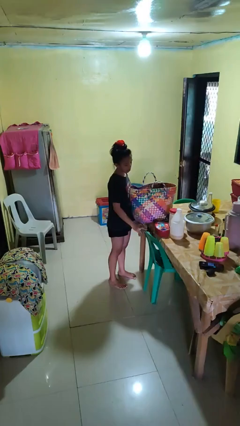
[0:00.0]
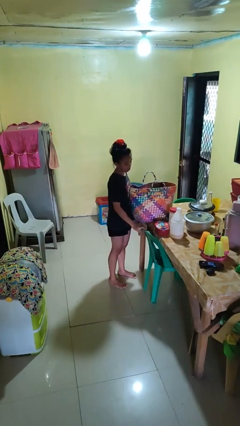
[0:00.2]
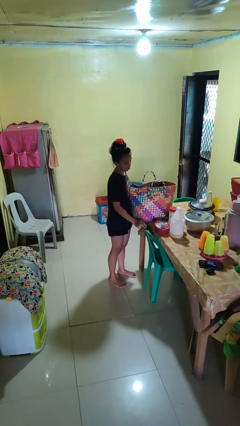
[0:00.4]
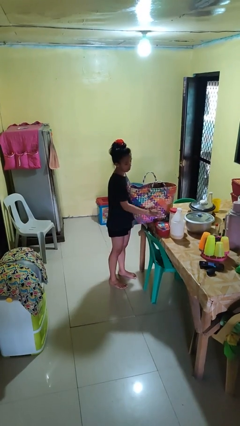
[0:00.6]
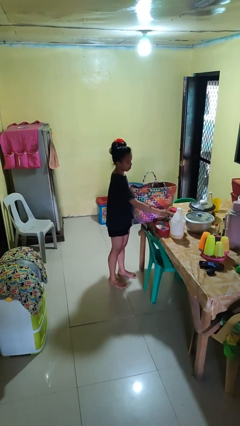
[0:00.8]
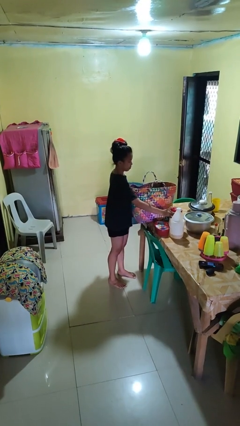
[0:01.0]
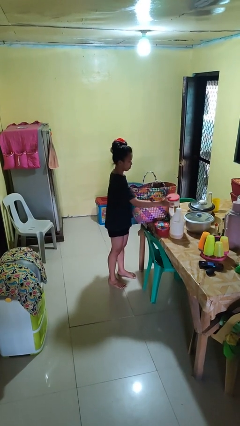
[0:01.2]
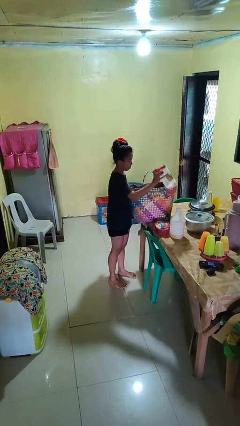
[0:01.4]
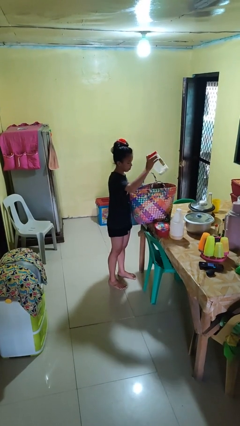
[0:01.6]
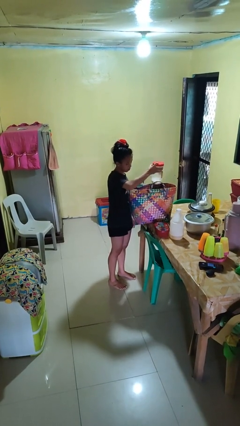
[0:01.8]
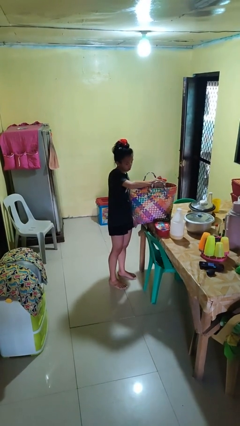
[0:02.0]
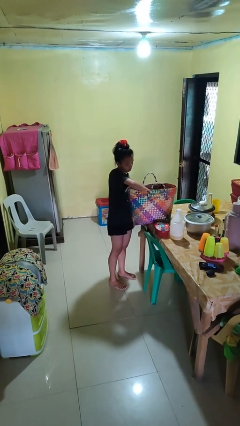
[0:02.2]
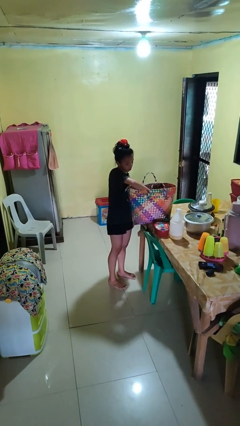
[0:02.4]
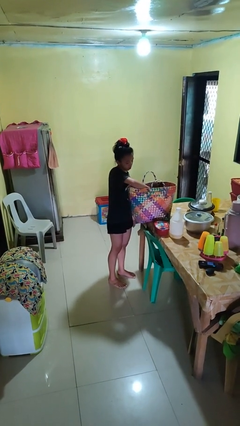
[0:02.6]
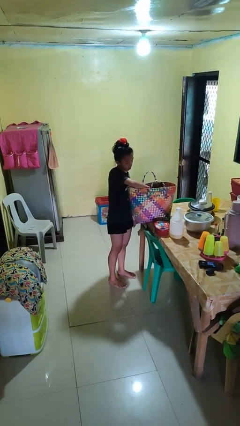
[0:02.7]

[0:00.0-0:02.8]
person puts object into basket

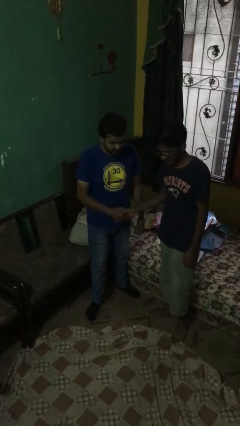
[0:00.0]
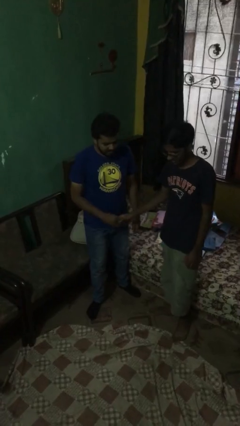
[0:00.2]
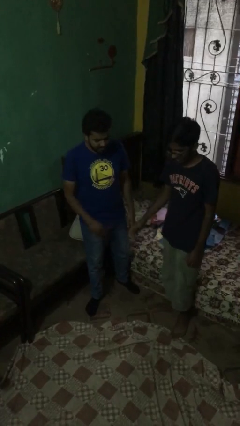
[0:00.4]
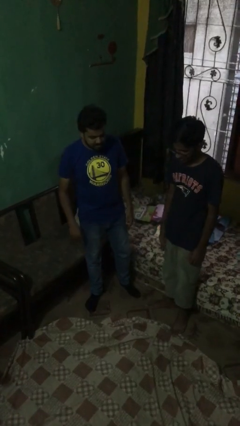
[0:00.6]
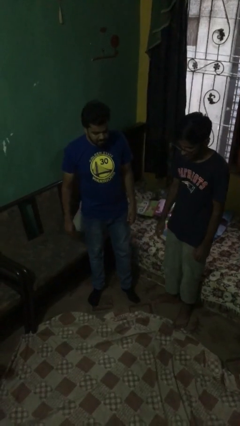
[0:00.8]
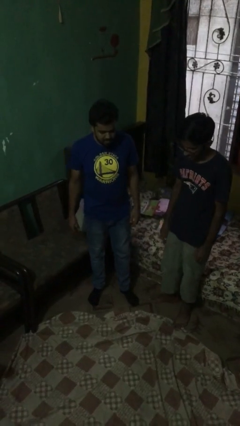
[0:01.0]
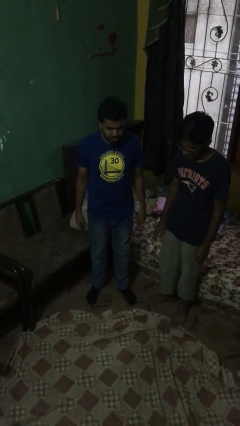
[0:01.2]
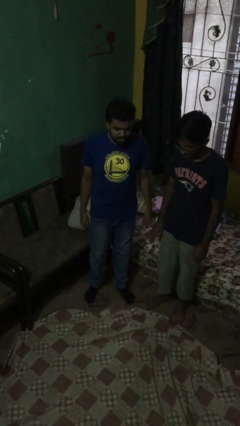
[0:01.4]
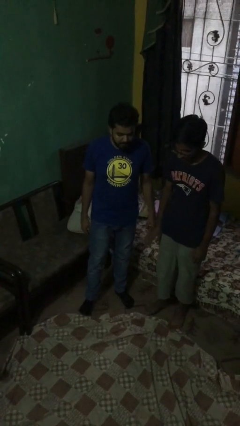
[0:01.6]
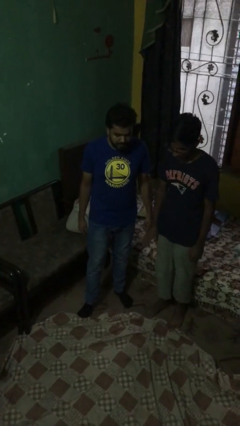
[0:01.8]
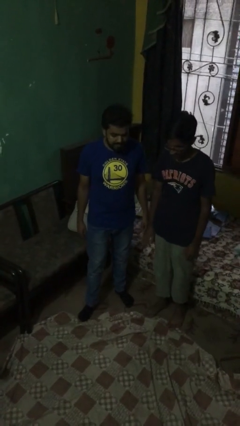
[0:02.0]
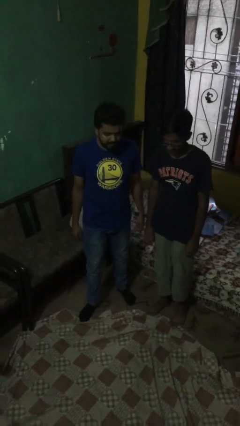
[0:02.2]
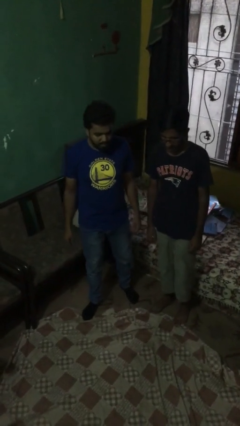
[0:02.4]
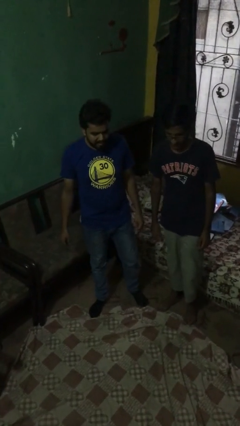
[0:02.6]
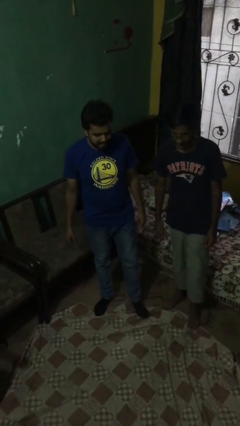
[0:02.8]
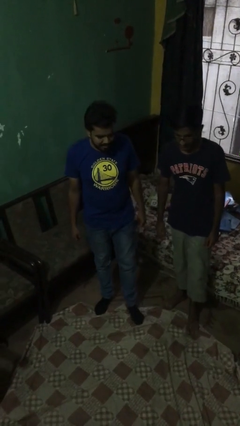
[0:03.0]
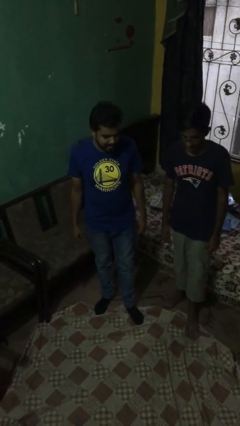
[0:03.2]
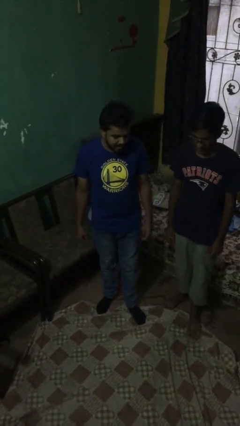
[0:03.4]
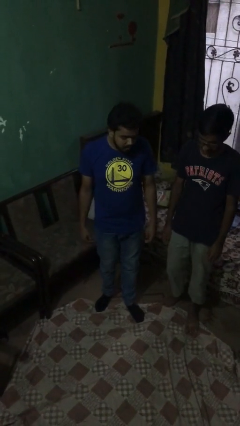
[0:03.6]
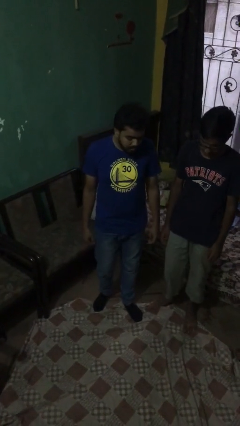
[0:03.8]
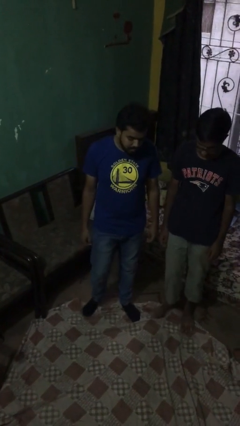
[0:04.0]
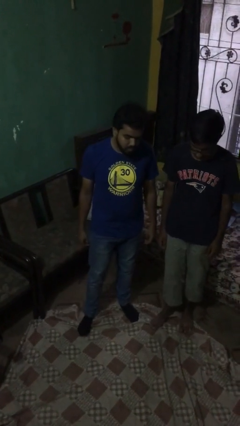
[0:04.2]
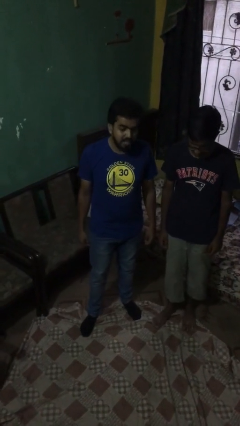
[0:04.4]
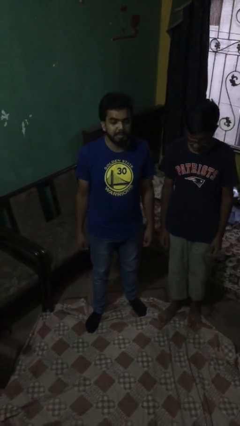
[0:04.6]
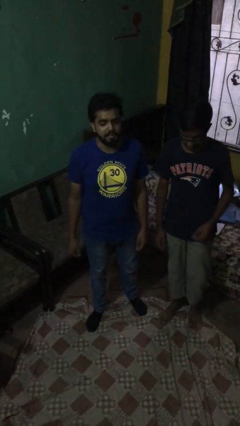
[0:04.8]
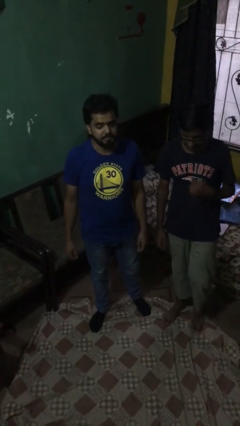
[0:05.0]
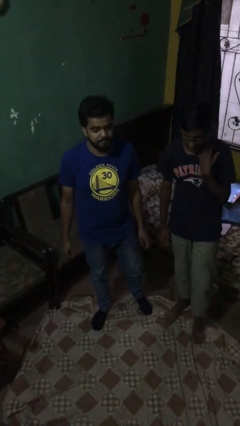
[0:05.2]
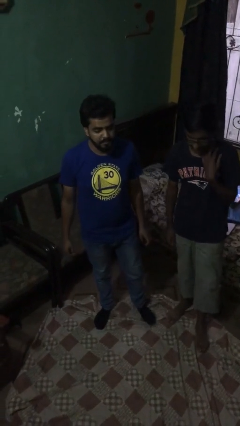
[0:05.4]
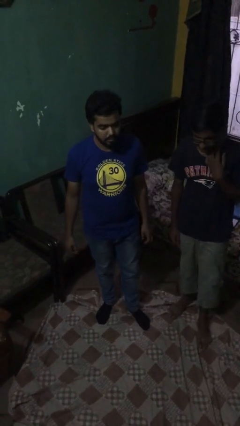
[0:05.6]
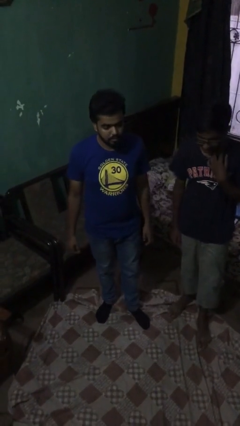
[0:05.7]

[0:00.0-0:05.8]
person talks to person

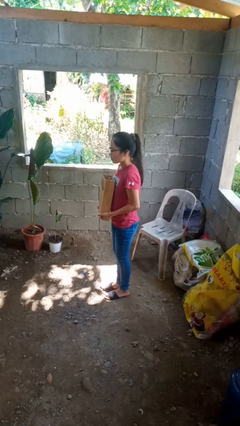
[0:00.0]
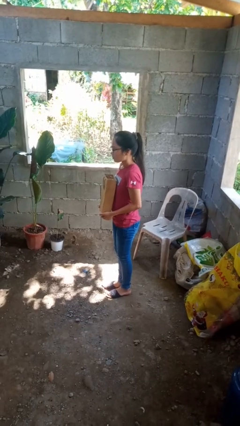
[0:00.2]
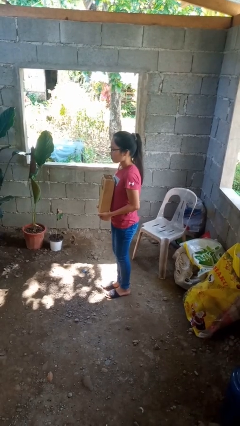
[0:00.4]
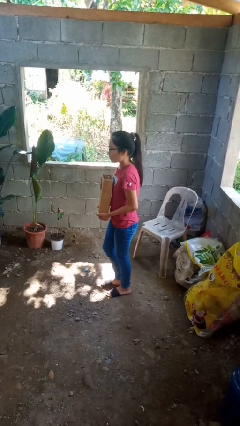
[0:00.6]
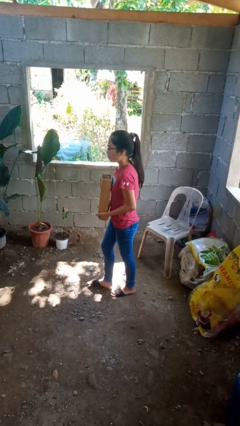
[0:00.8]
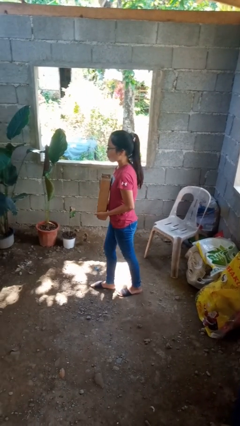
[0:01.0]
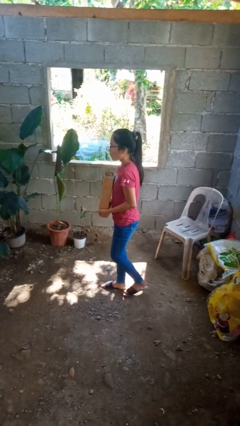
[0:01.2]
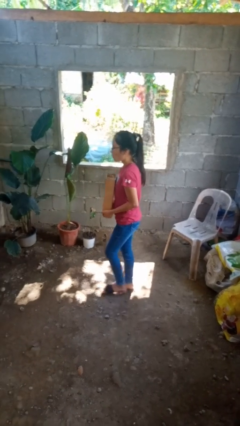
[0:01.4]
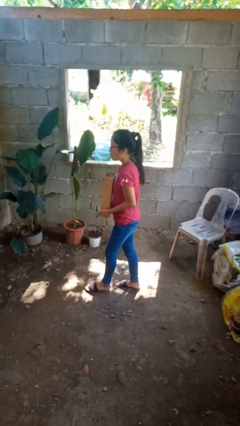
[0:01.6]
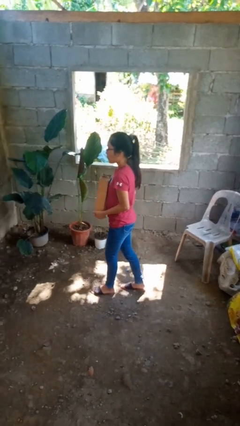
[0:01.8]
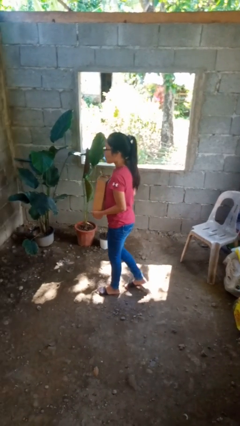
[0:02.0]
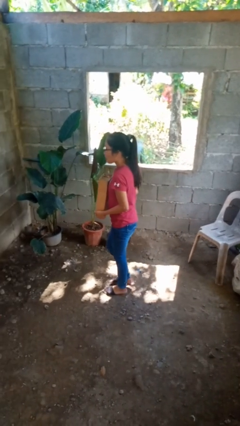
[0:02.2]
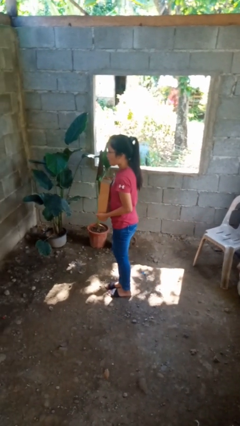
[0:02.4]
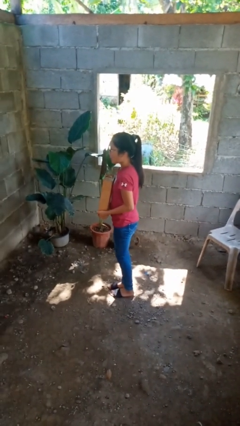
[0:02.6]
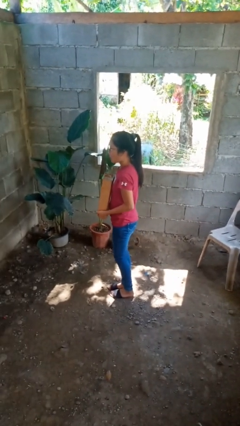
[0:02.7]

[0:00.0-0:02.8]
person carries groceries

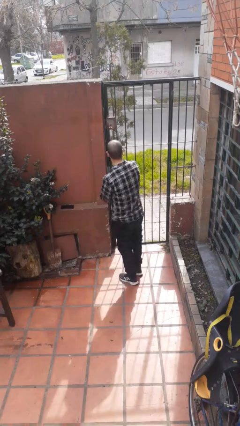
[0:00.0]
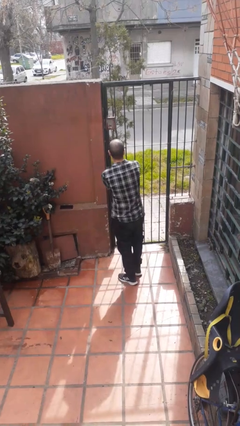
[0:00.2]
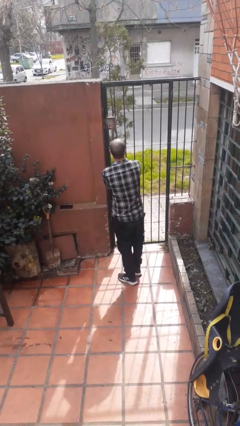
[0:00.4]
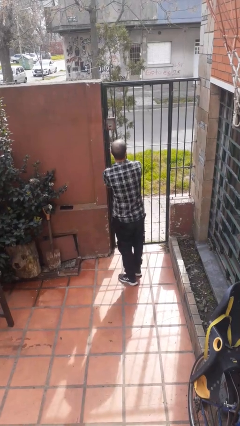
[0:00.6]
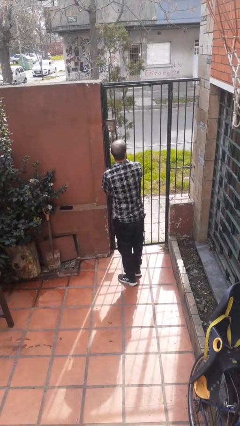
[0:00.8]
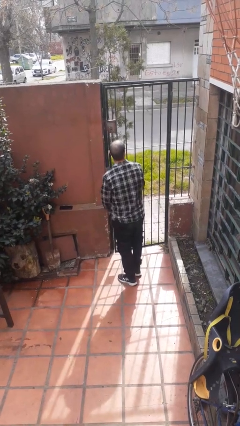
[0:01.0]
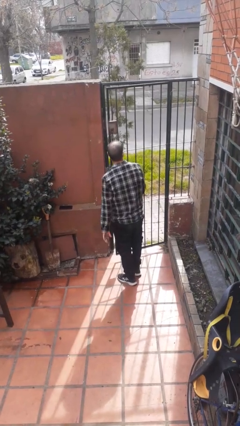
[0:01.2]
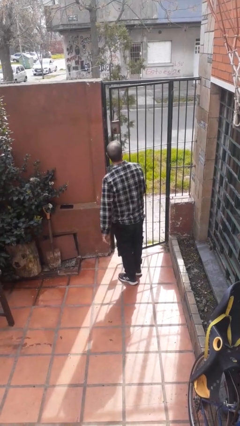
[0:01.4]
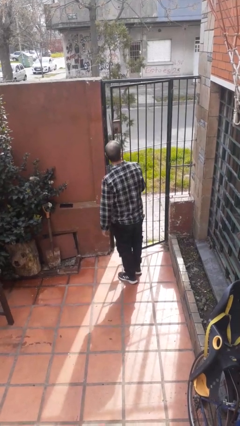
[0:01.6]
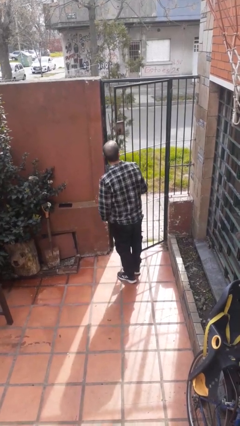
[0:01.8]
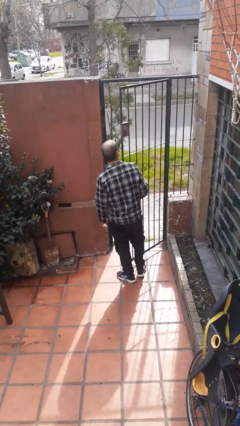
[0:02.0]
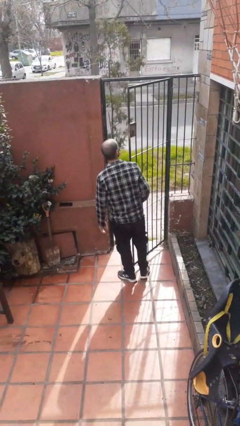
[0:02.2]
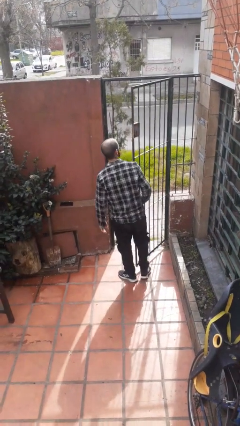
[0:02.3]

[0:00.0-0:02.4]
person opens gate

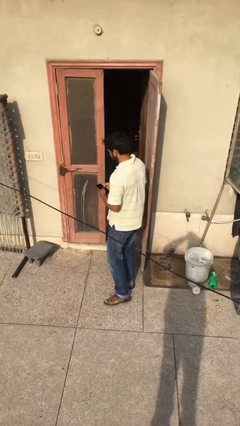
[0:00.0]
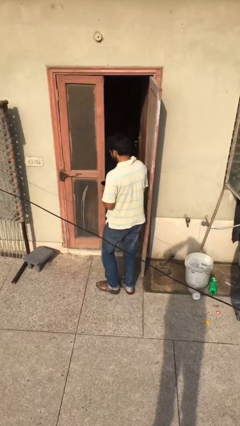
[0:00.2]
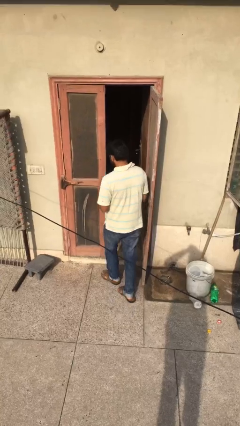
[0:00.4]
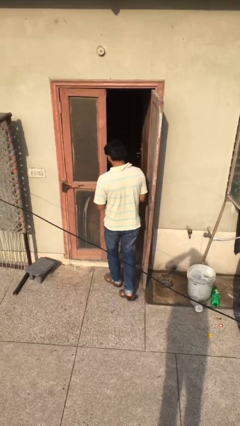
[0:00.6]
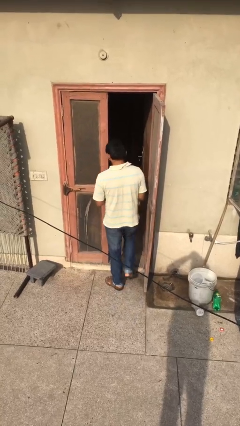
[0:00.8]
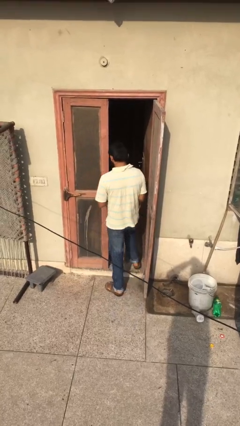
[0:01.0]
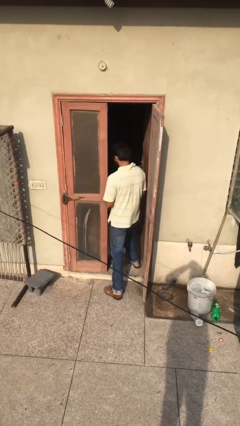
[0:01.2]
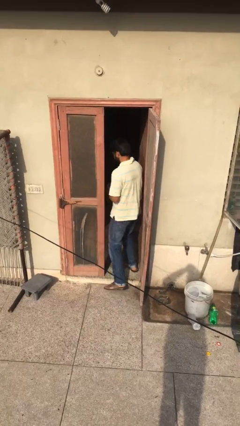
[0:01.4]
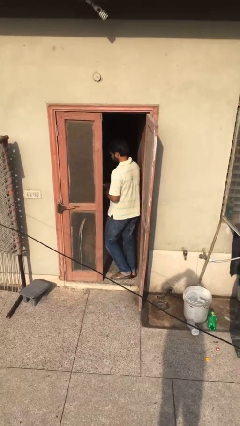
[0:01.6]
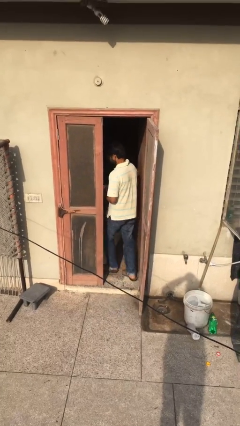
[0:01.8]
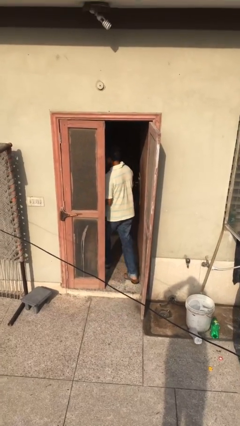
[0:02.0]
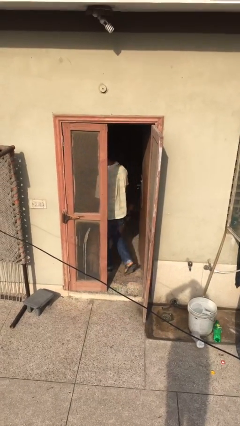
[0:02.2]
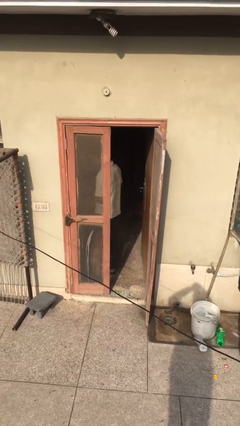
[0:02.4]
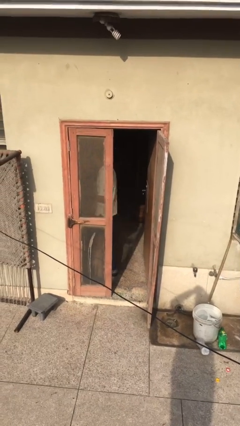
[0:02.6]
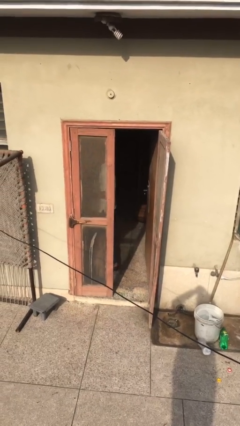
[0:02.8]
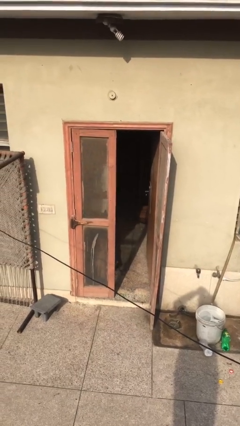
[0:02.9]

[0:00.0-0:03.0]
person exits scene through structure

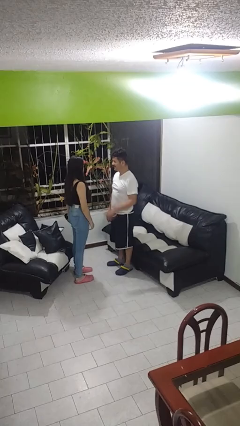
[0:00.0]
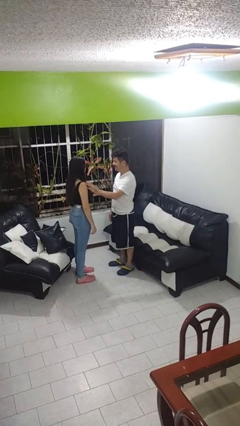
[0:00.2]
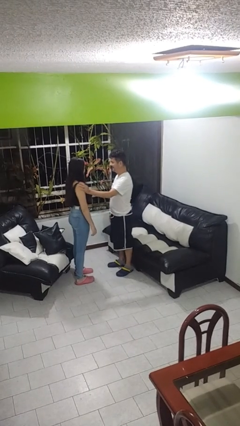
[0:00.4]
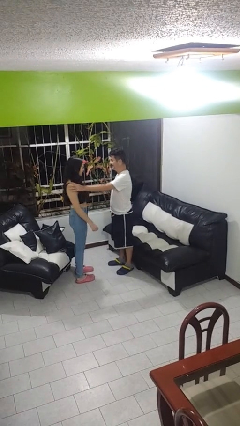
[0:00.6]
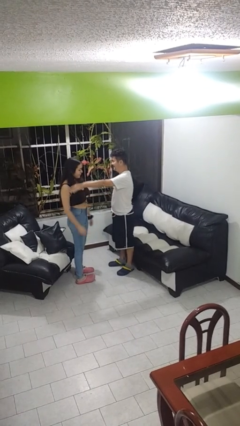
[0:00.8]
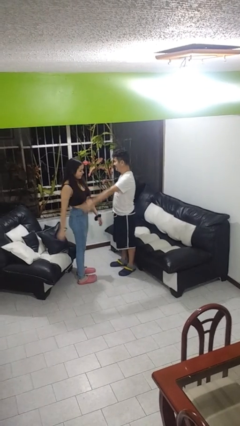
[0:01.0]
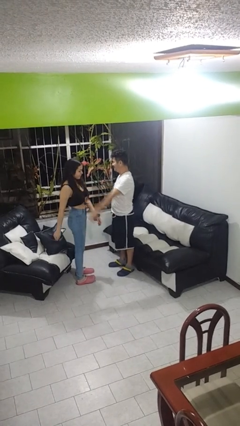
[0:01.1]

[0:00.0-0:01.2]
person shoves person
